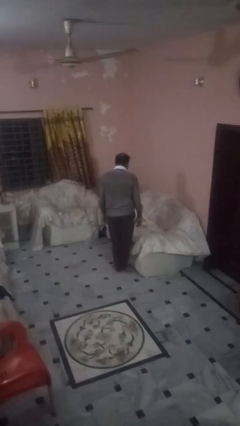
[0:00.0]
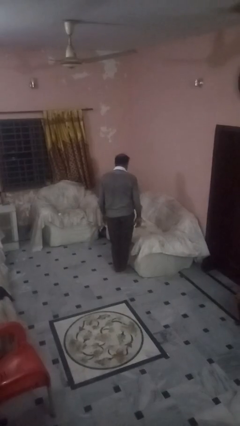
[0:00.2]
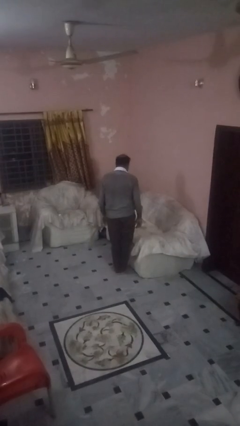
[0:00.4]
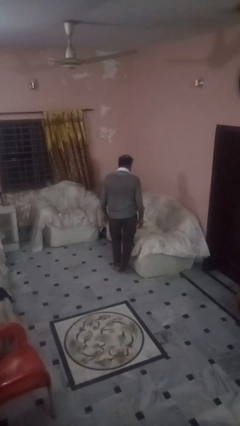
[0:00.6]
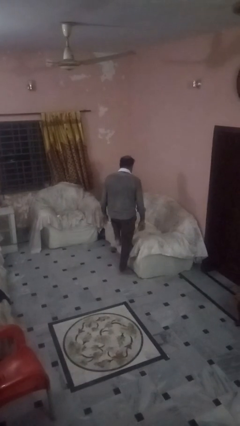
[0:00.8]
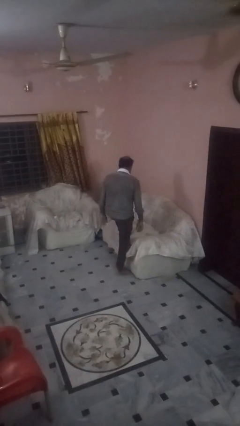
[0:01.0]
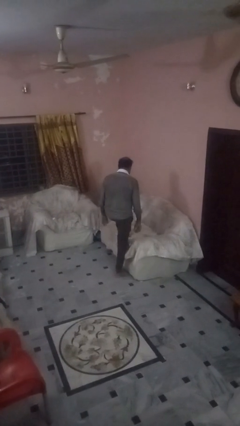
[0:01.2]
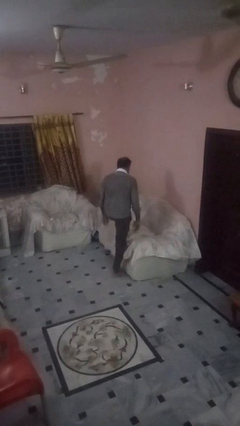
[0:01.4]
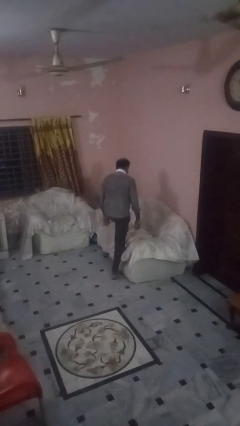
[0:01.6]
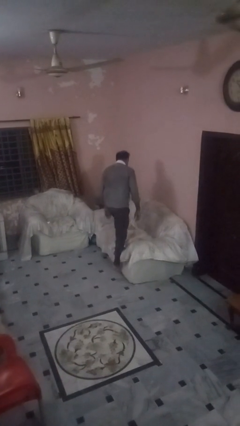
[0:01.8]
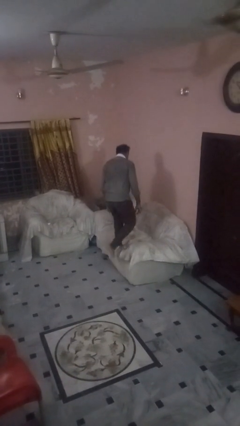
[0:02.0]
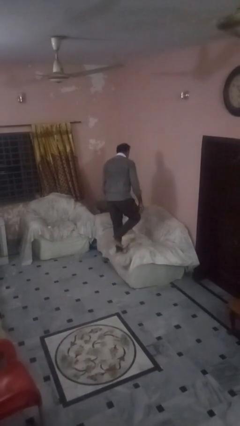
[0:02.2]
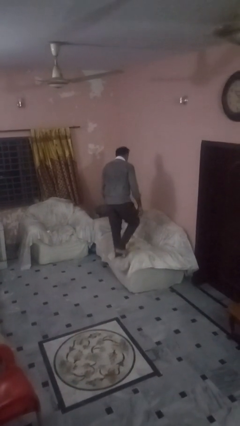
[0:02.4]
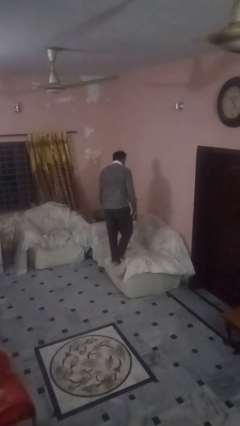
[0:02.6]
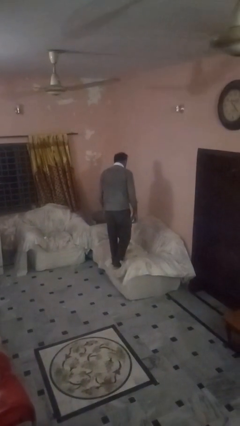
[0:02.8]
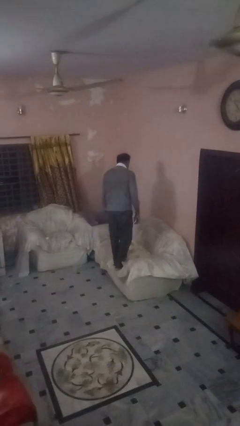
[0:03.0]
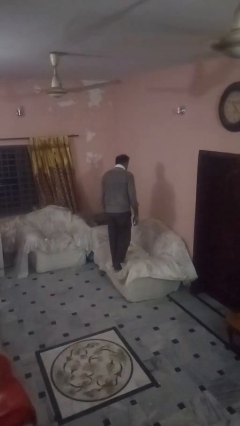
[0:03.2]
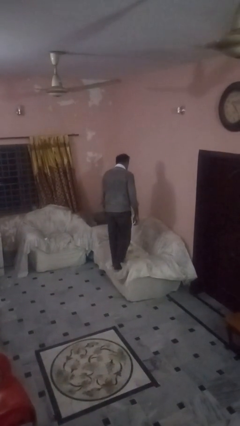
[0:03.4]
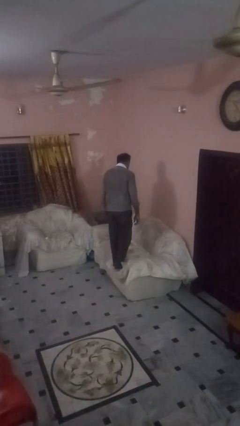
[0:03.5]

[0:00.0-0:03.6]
person climbs on couch

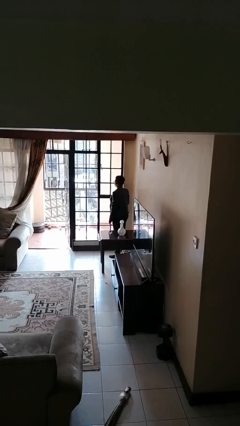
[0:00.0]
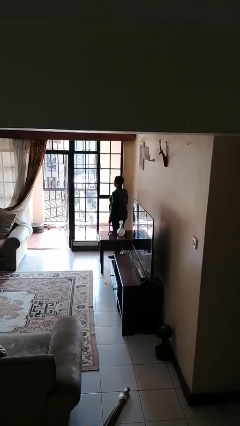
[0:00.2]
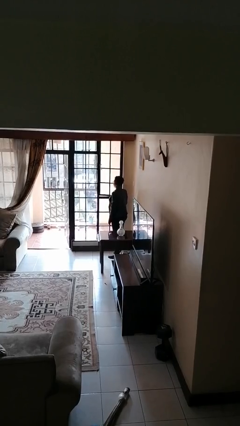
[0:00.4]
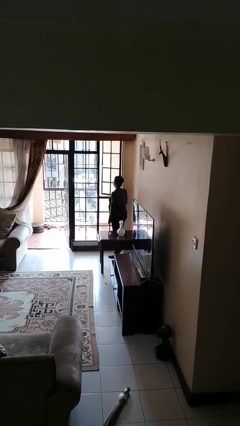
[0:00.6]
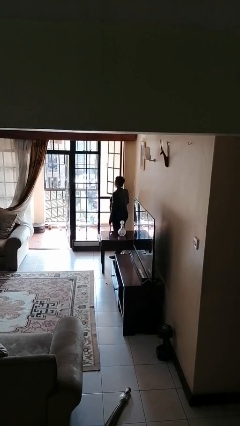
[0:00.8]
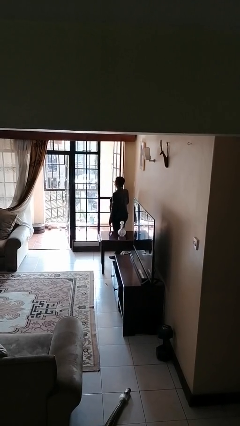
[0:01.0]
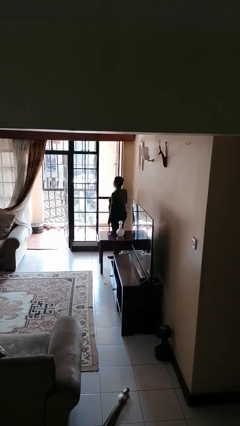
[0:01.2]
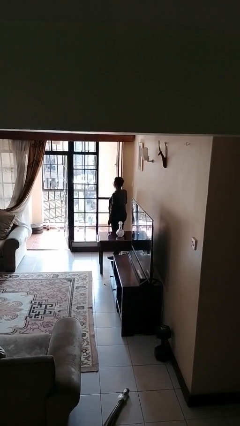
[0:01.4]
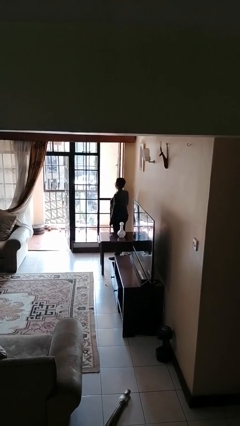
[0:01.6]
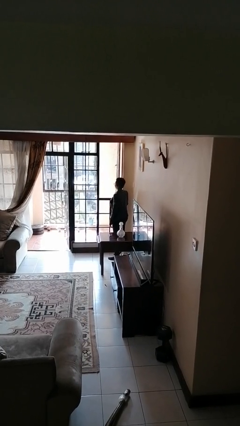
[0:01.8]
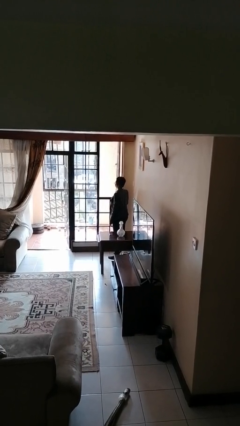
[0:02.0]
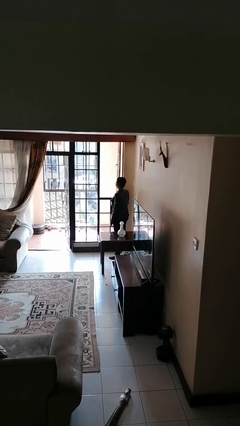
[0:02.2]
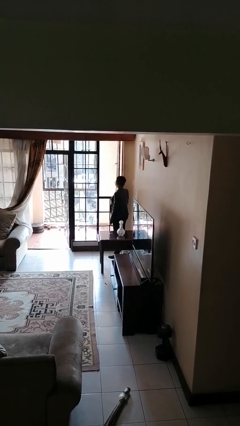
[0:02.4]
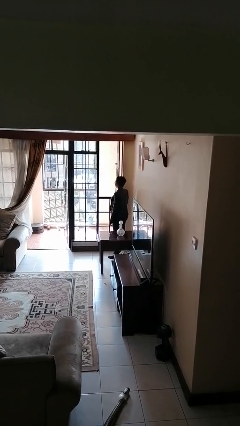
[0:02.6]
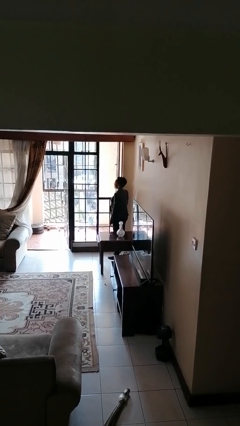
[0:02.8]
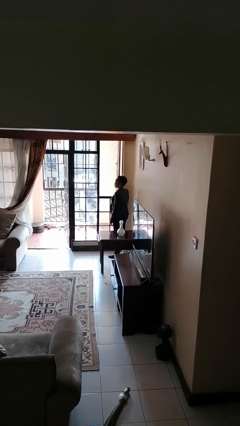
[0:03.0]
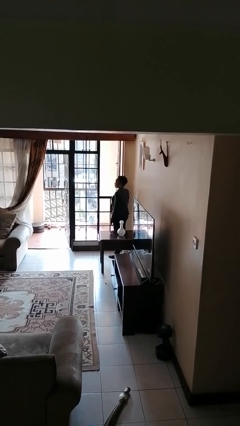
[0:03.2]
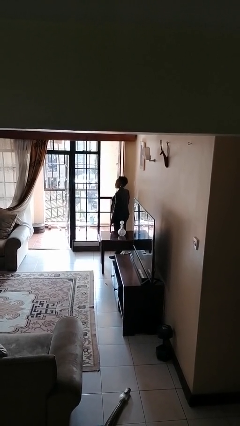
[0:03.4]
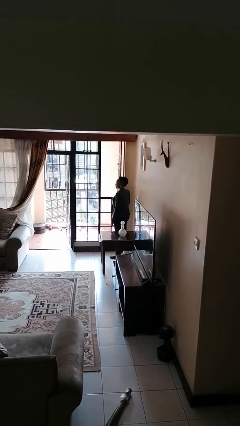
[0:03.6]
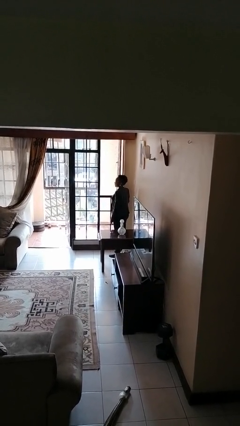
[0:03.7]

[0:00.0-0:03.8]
person opens home window

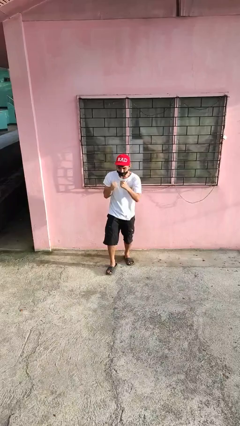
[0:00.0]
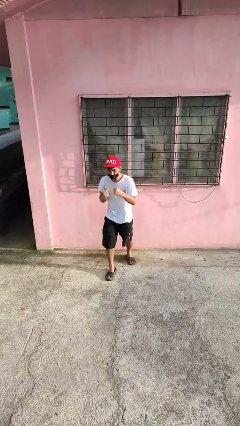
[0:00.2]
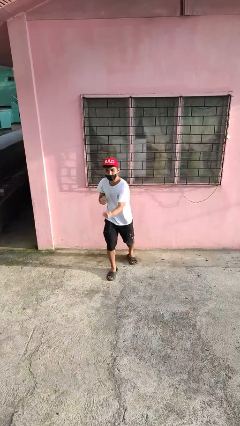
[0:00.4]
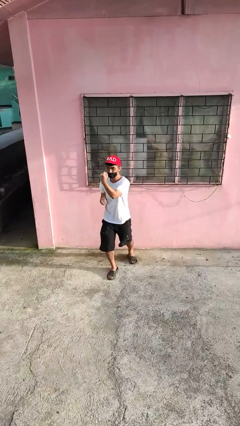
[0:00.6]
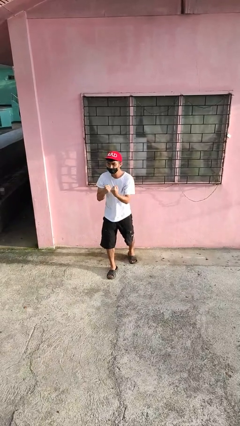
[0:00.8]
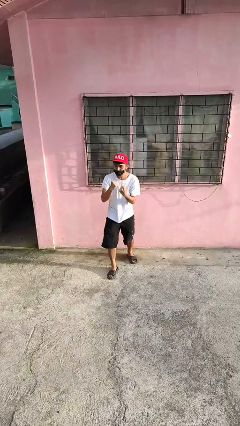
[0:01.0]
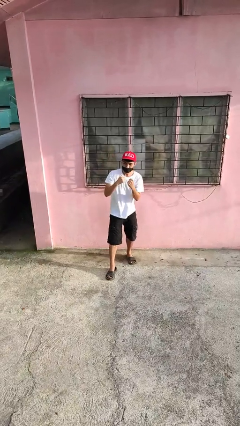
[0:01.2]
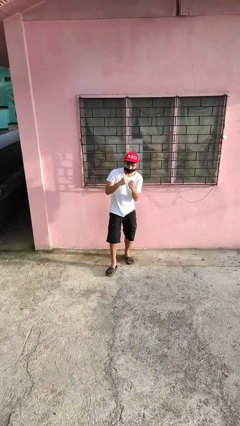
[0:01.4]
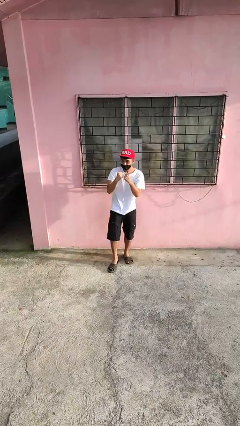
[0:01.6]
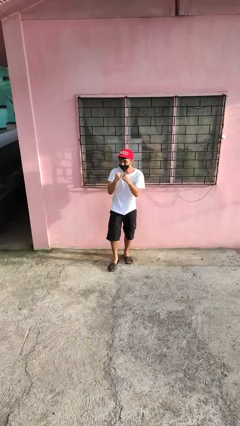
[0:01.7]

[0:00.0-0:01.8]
person punches

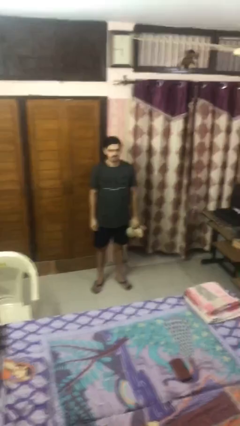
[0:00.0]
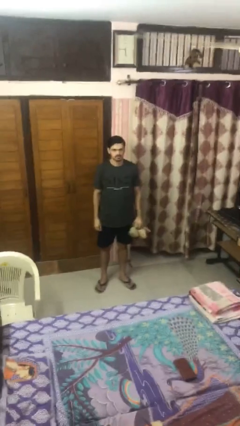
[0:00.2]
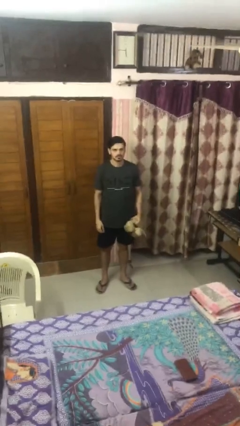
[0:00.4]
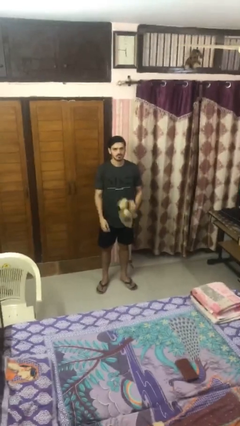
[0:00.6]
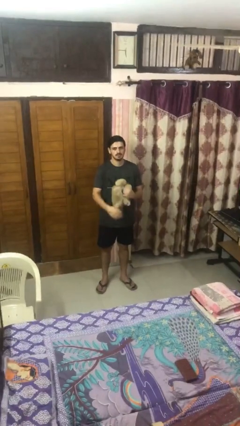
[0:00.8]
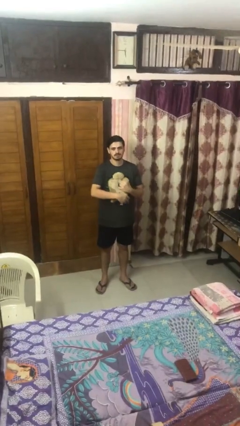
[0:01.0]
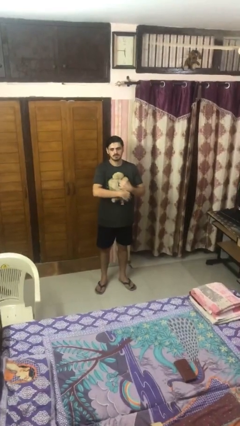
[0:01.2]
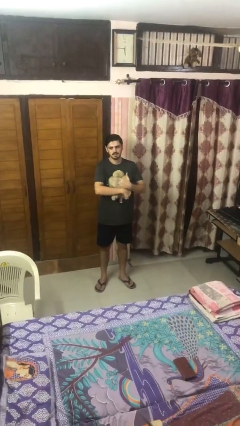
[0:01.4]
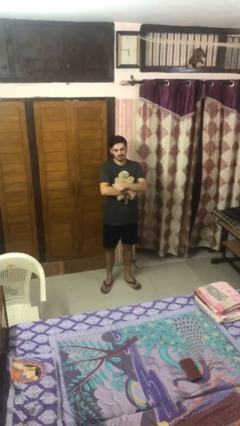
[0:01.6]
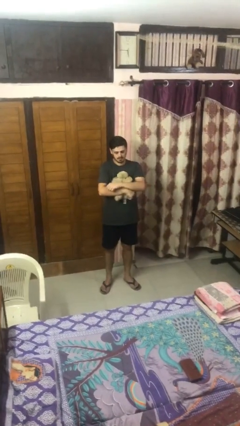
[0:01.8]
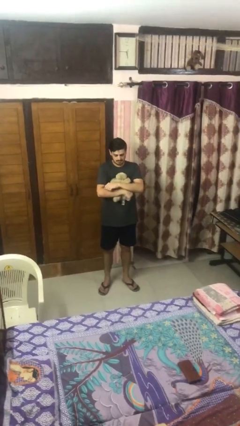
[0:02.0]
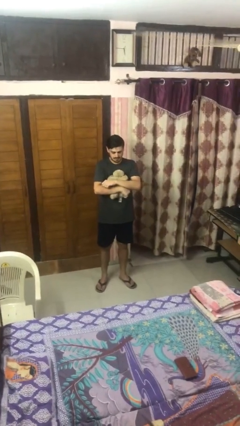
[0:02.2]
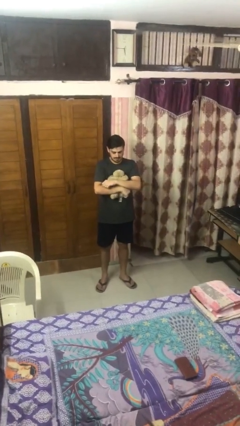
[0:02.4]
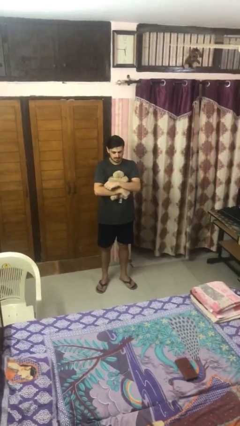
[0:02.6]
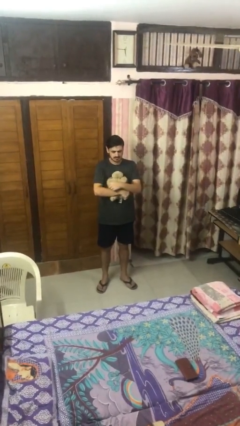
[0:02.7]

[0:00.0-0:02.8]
person hugs stuffed animal

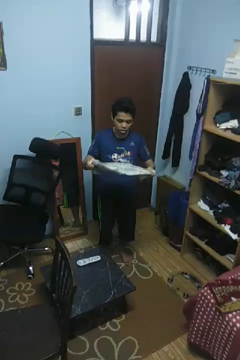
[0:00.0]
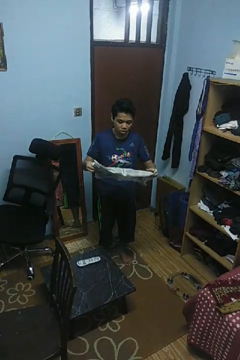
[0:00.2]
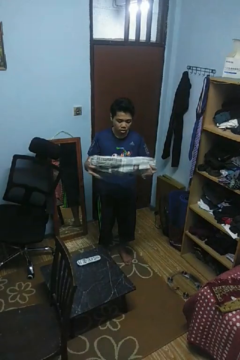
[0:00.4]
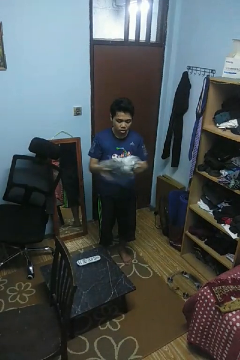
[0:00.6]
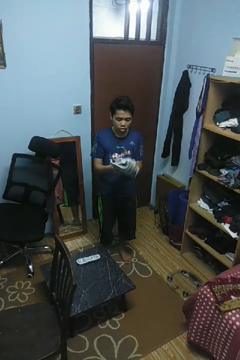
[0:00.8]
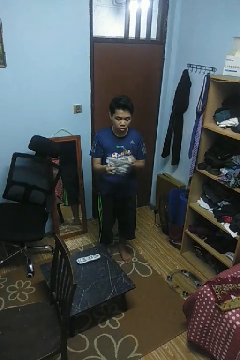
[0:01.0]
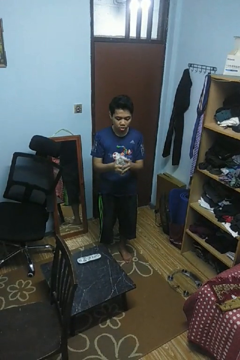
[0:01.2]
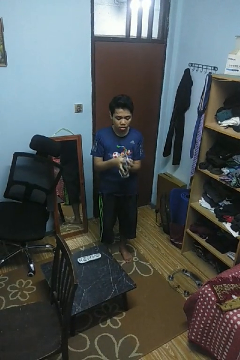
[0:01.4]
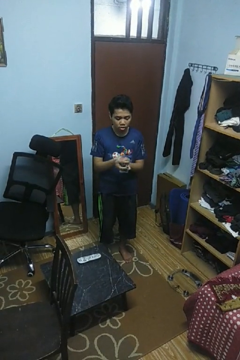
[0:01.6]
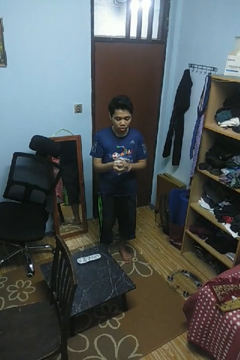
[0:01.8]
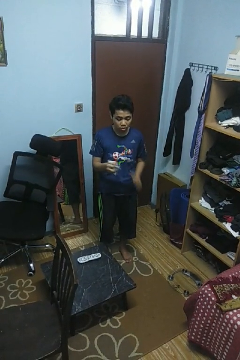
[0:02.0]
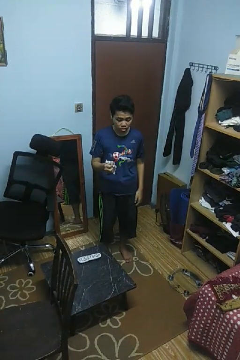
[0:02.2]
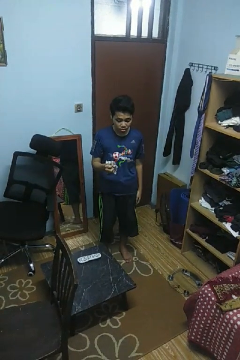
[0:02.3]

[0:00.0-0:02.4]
person crumples paper

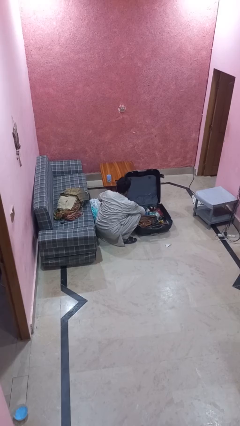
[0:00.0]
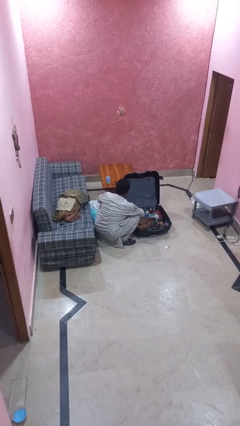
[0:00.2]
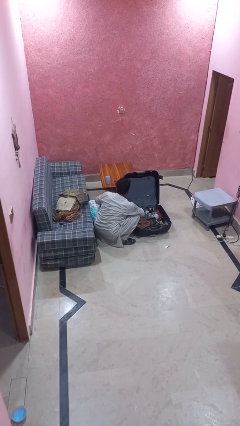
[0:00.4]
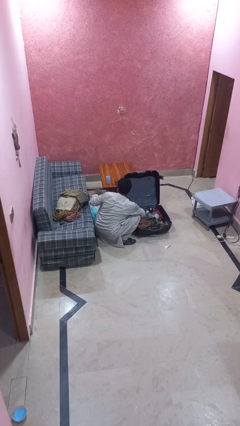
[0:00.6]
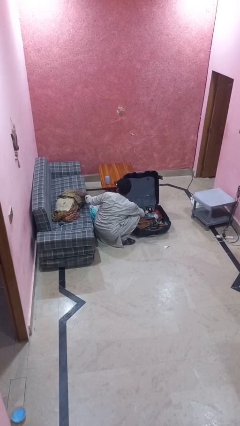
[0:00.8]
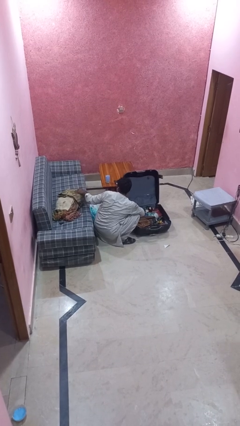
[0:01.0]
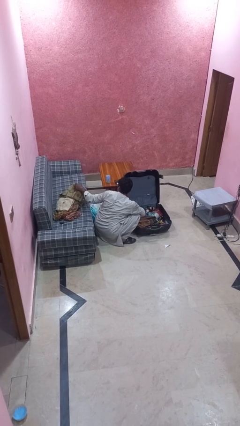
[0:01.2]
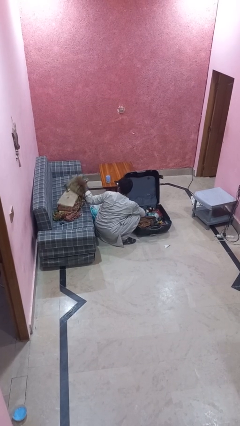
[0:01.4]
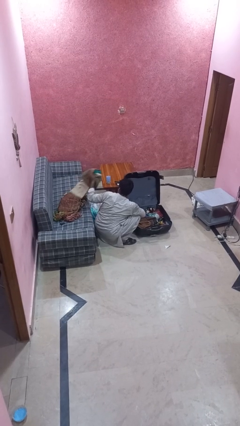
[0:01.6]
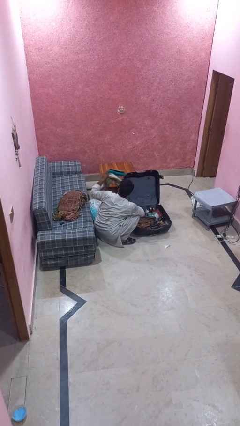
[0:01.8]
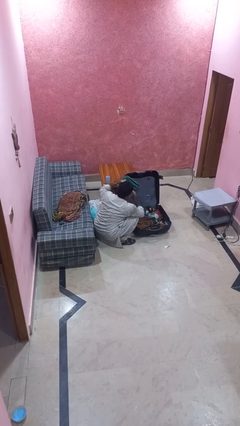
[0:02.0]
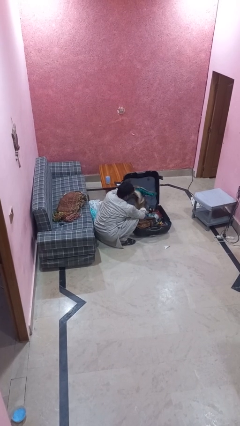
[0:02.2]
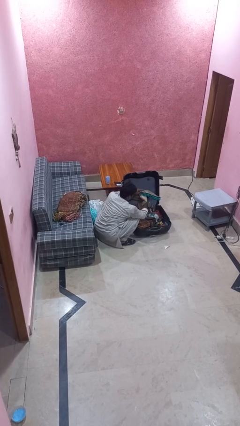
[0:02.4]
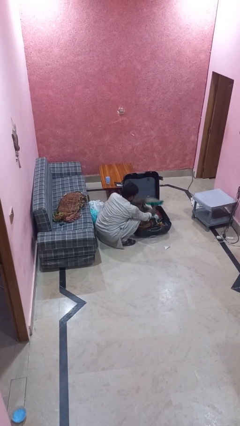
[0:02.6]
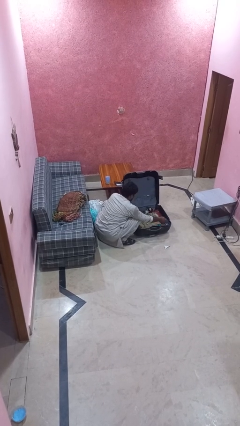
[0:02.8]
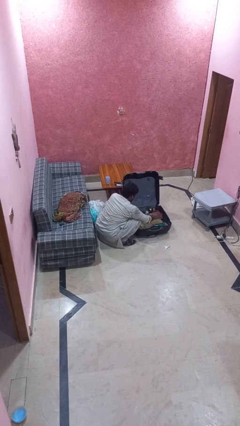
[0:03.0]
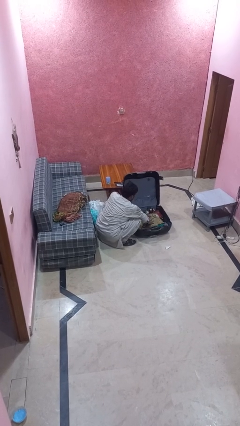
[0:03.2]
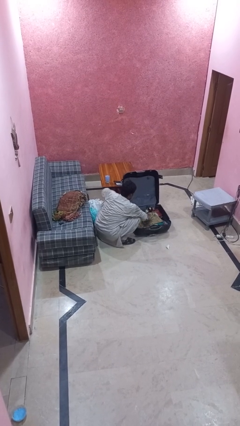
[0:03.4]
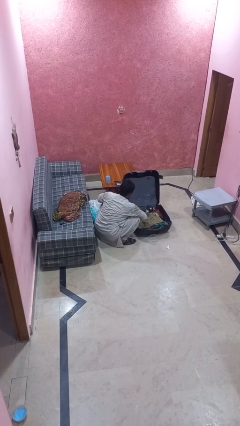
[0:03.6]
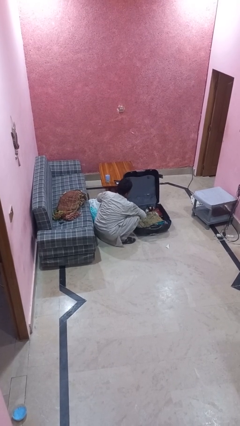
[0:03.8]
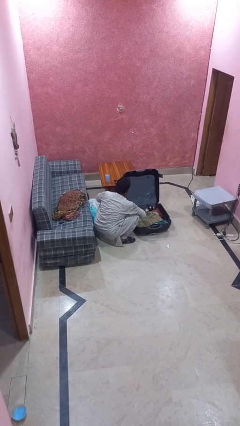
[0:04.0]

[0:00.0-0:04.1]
person loads clothes into suitcase
